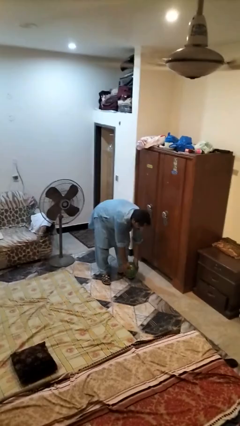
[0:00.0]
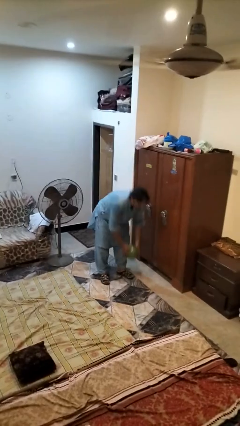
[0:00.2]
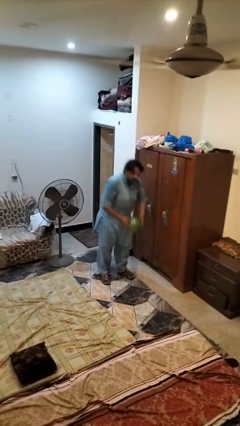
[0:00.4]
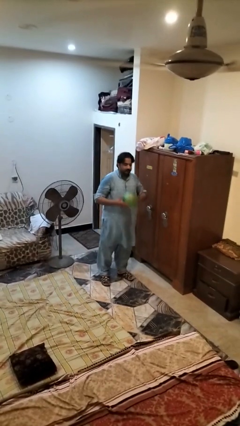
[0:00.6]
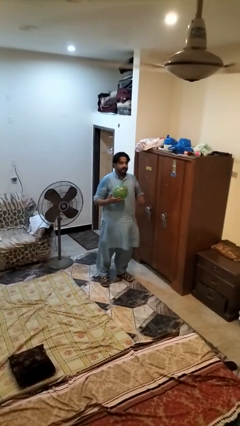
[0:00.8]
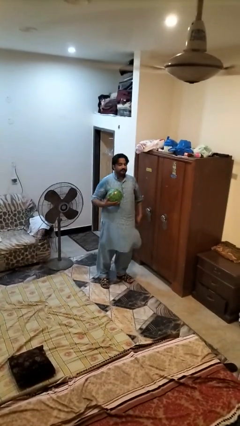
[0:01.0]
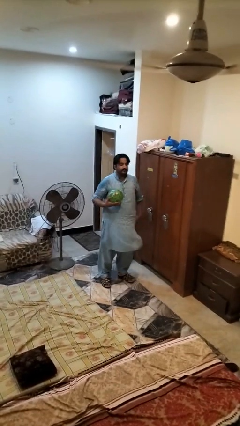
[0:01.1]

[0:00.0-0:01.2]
person picks up object from floor

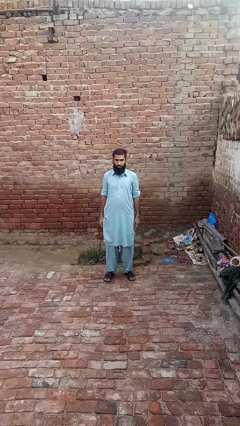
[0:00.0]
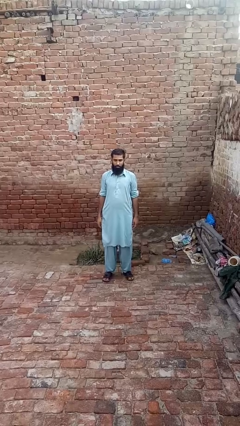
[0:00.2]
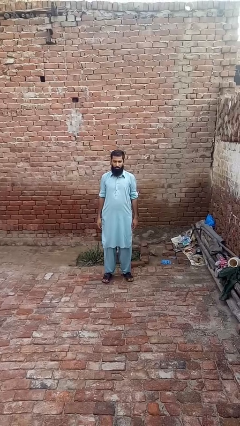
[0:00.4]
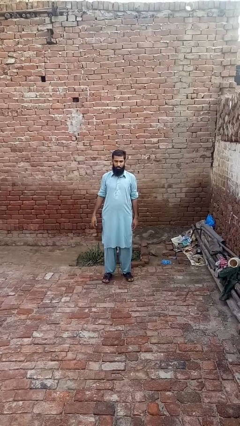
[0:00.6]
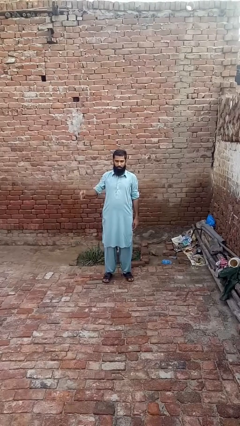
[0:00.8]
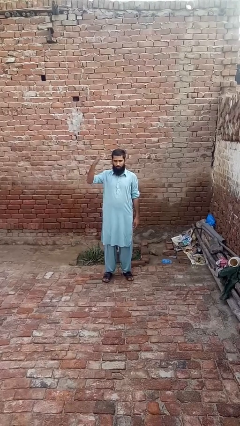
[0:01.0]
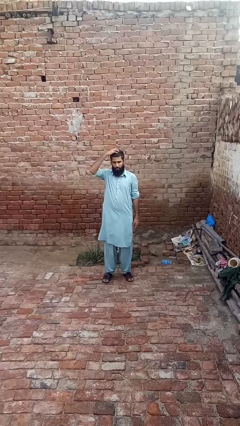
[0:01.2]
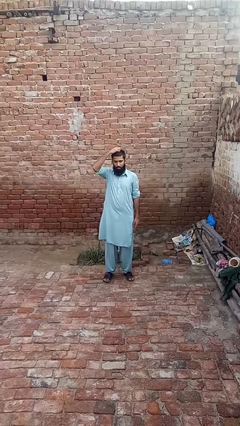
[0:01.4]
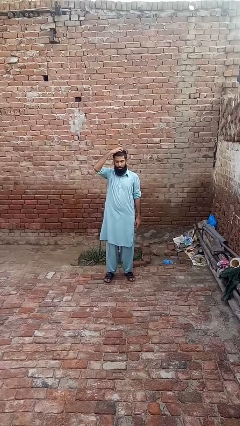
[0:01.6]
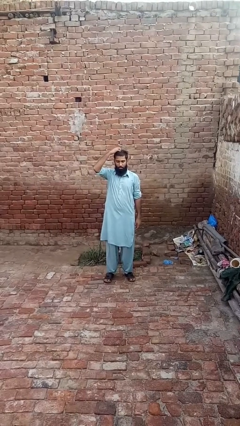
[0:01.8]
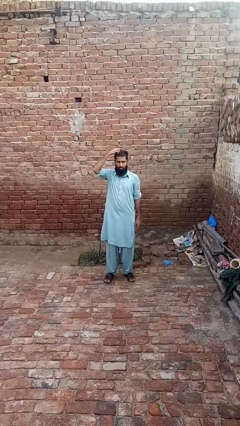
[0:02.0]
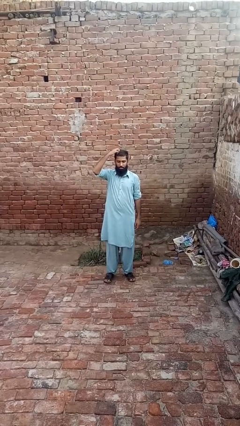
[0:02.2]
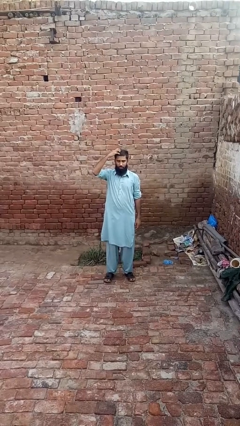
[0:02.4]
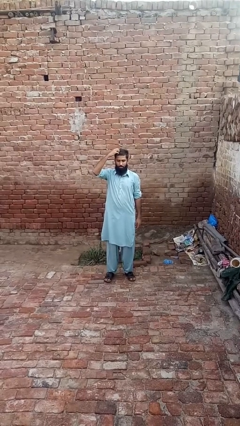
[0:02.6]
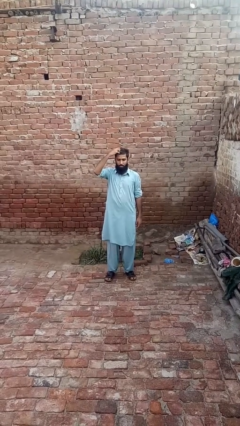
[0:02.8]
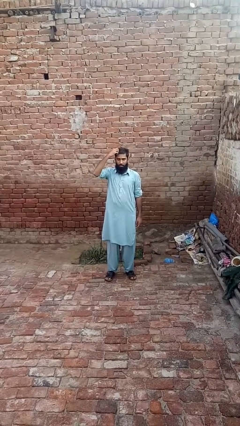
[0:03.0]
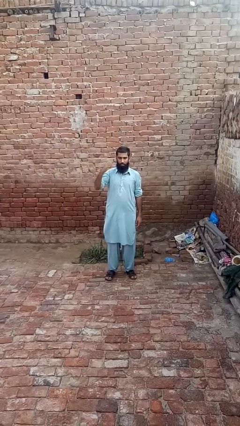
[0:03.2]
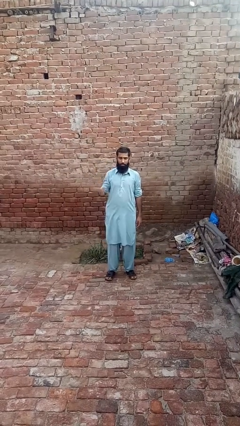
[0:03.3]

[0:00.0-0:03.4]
person scratches face

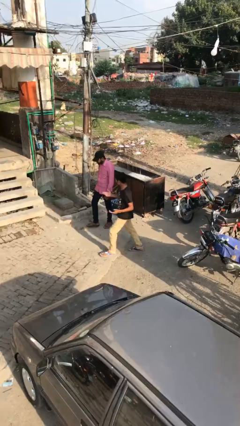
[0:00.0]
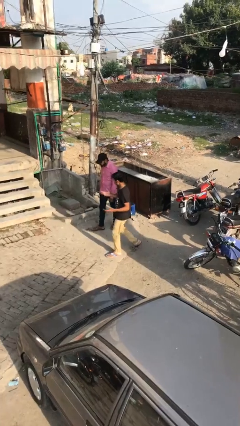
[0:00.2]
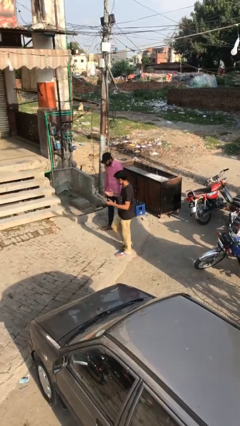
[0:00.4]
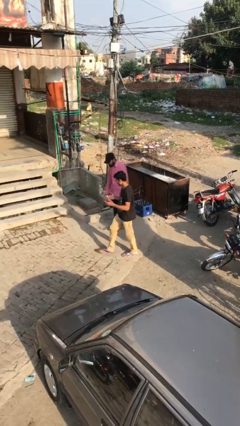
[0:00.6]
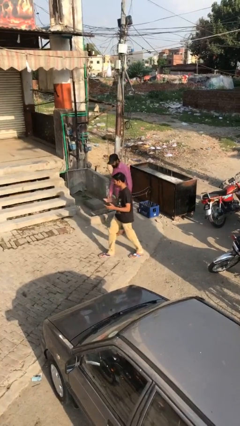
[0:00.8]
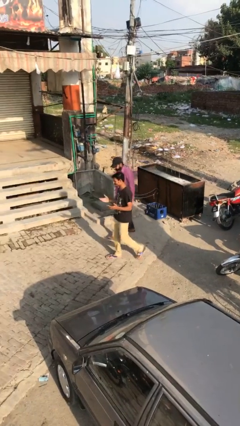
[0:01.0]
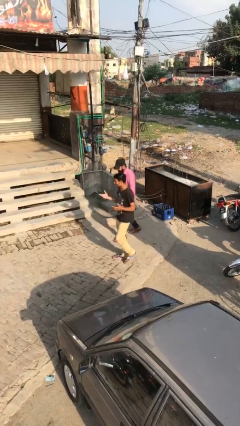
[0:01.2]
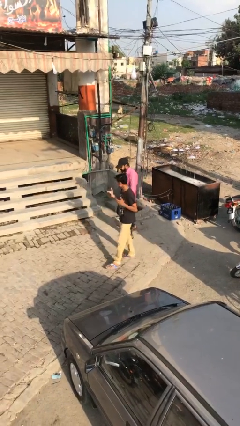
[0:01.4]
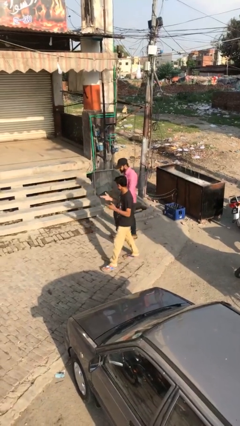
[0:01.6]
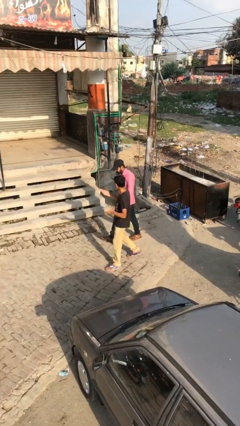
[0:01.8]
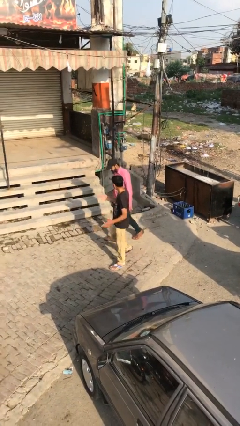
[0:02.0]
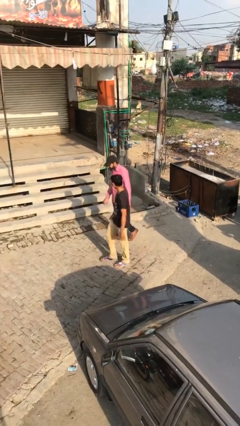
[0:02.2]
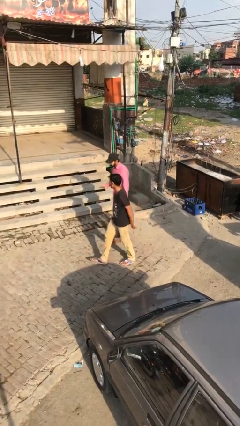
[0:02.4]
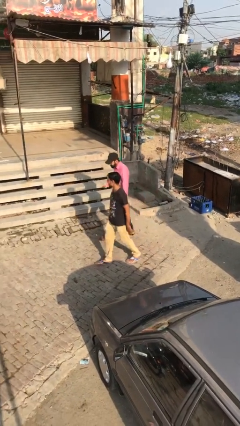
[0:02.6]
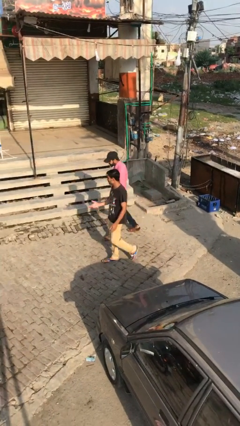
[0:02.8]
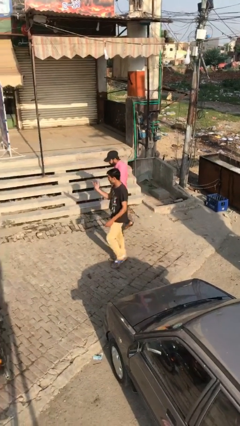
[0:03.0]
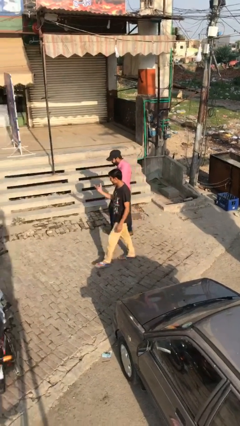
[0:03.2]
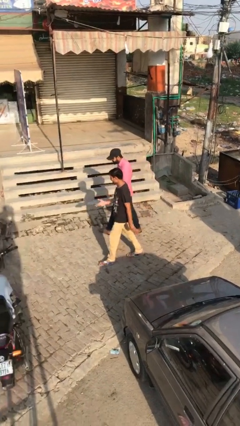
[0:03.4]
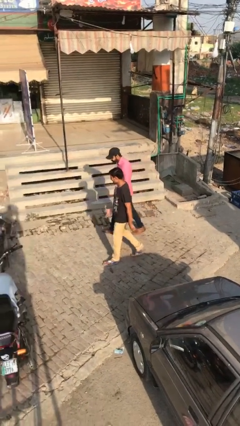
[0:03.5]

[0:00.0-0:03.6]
person talks to person

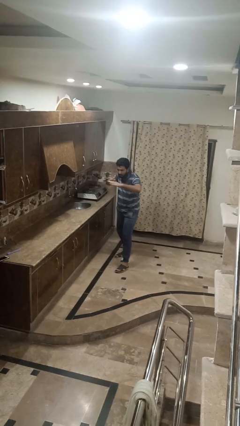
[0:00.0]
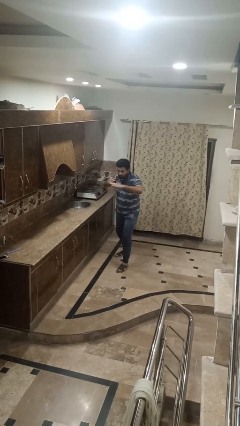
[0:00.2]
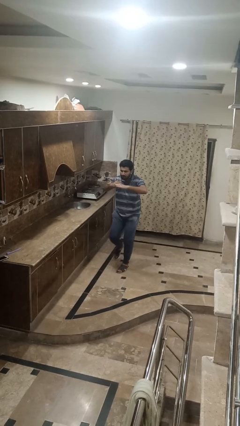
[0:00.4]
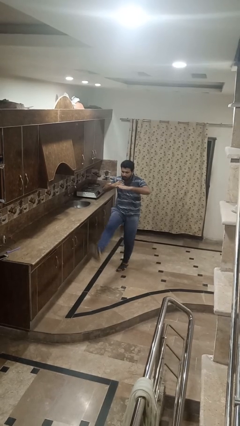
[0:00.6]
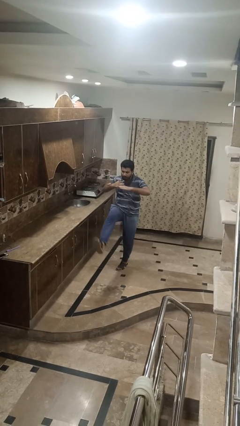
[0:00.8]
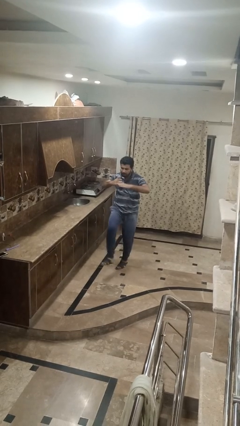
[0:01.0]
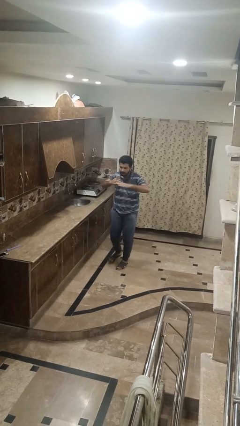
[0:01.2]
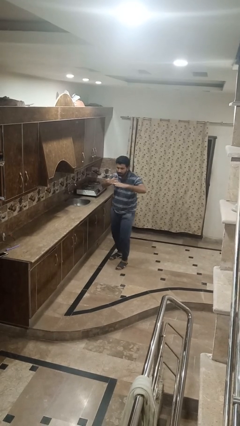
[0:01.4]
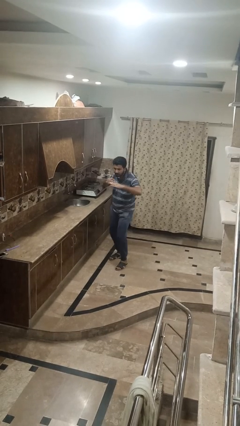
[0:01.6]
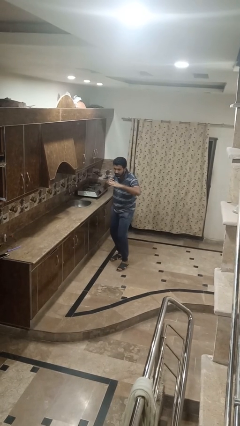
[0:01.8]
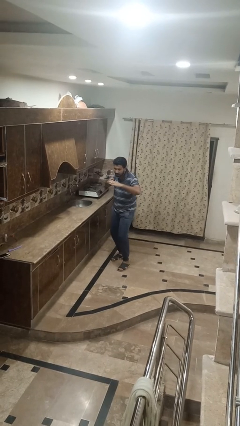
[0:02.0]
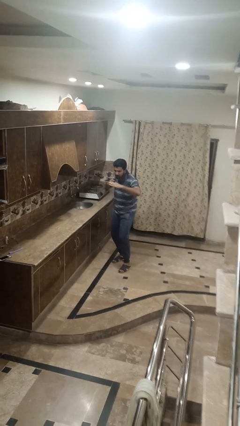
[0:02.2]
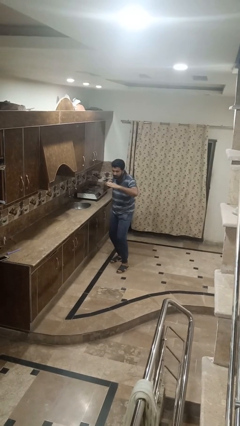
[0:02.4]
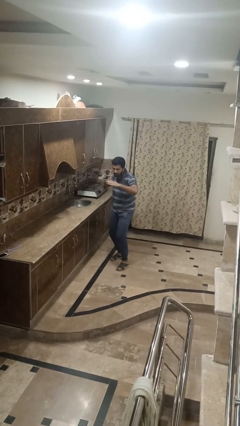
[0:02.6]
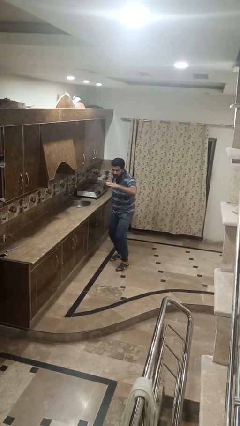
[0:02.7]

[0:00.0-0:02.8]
person karate kicks

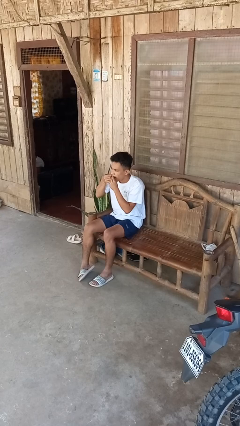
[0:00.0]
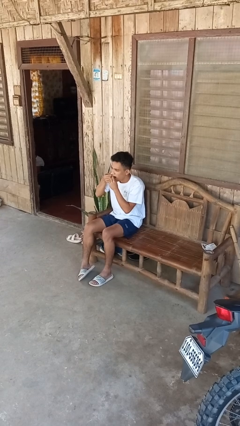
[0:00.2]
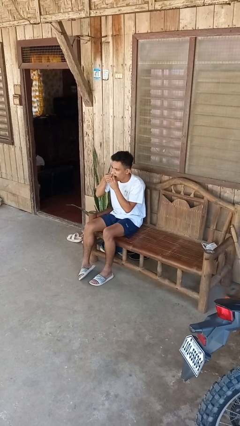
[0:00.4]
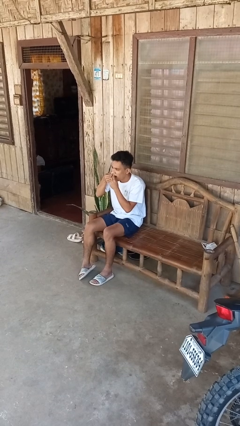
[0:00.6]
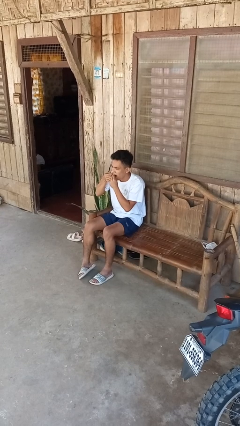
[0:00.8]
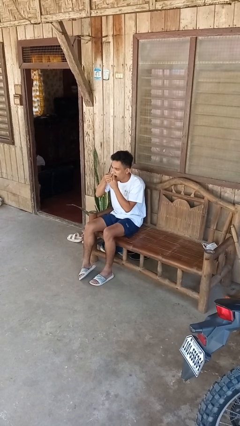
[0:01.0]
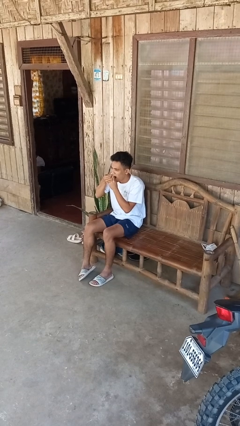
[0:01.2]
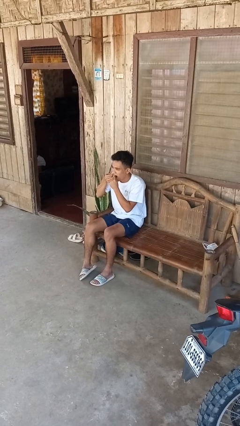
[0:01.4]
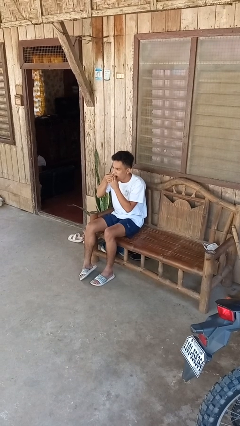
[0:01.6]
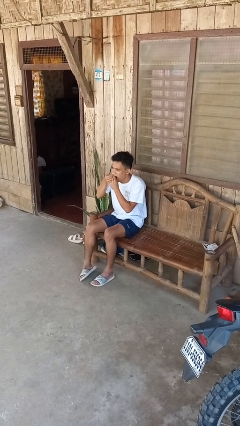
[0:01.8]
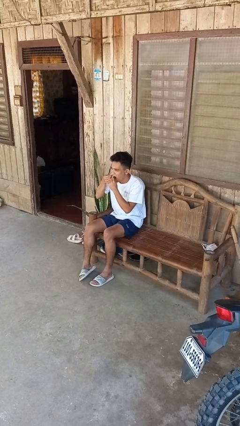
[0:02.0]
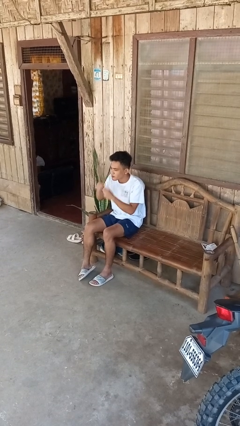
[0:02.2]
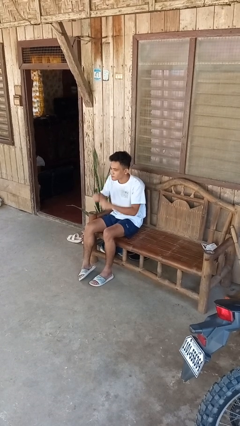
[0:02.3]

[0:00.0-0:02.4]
person flosses

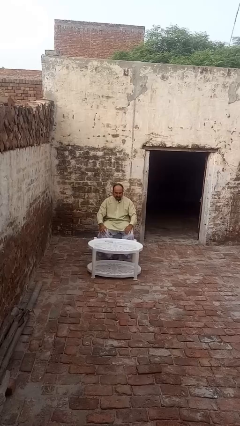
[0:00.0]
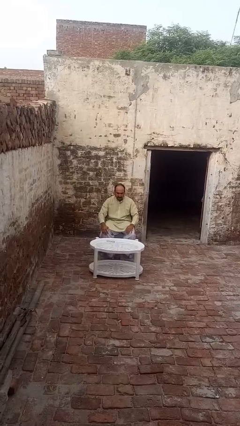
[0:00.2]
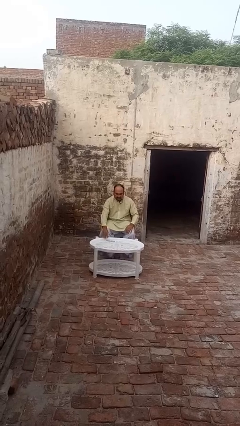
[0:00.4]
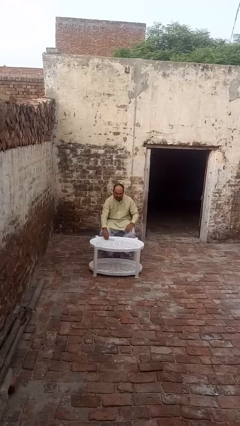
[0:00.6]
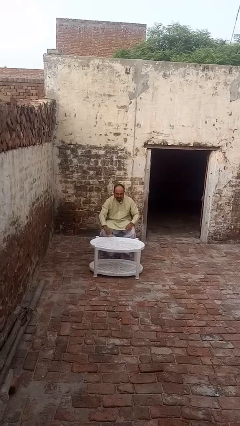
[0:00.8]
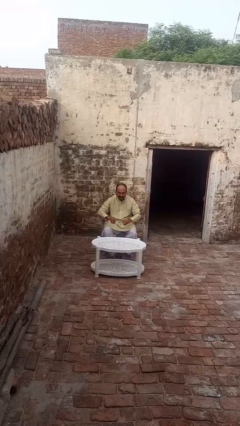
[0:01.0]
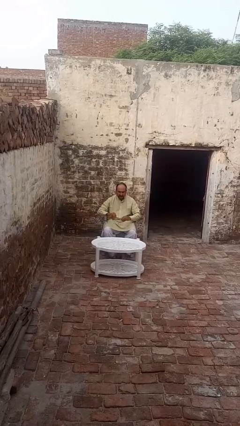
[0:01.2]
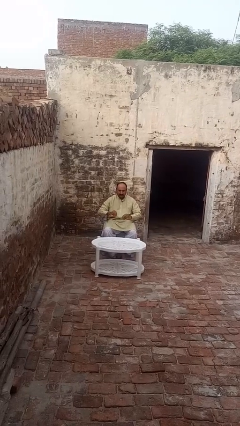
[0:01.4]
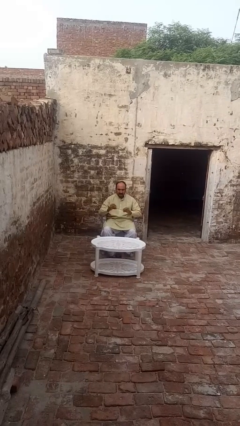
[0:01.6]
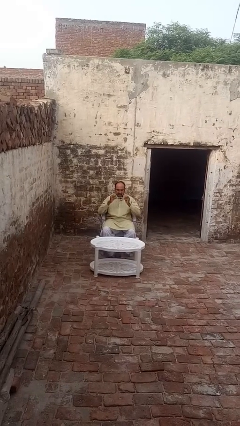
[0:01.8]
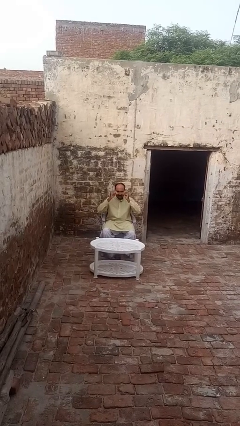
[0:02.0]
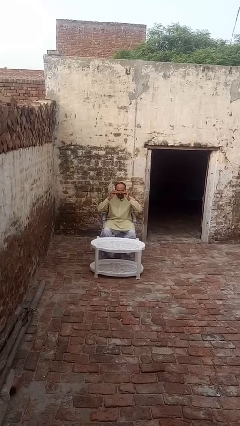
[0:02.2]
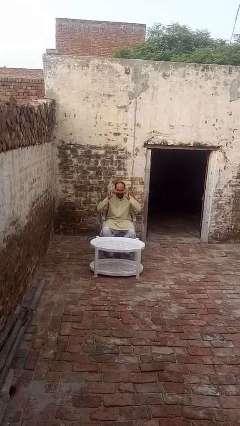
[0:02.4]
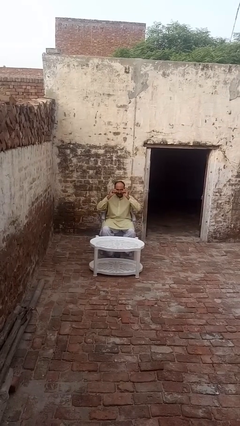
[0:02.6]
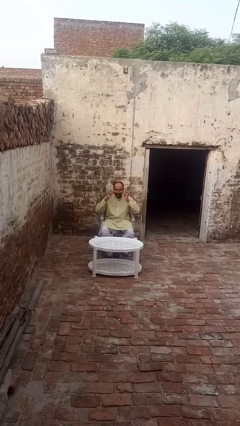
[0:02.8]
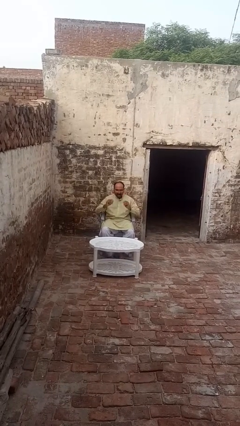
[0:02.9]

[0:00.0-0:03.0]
person puts on glasses

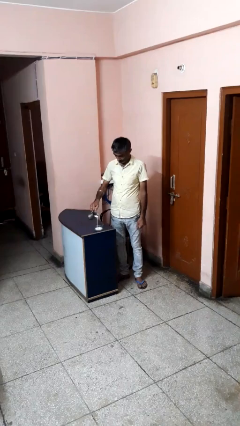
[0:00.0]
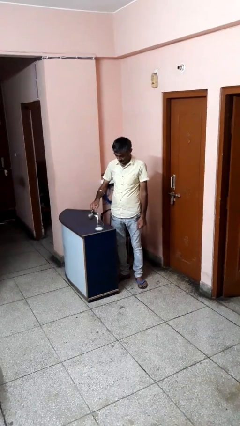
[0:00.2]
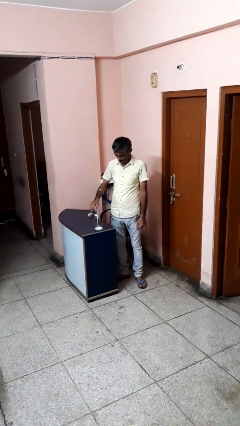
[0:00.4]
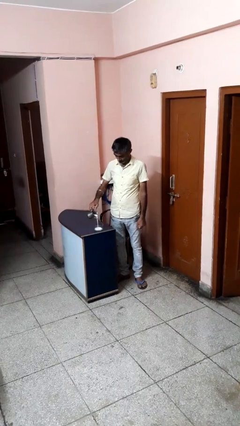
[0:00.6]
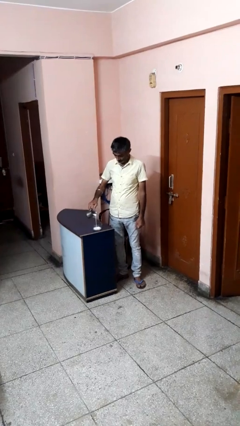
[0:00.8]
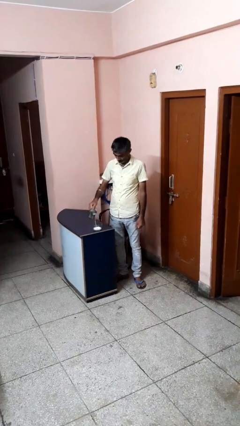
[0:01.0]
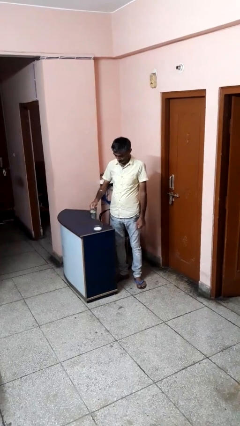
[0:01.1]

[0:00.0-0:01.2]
person pours into bowl
